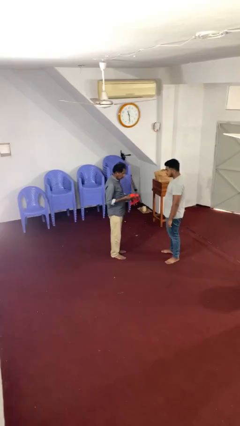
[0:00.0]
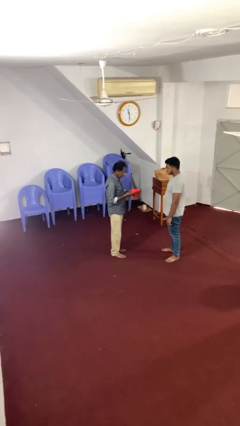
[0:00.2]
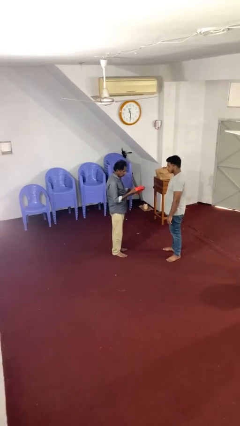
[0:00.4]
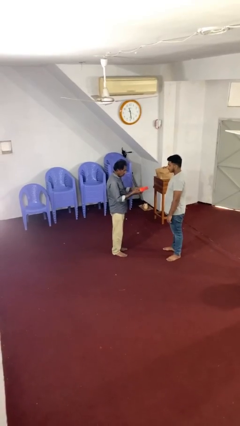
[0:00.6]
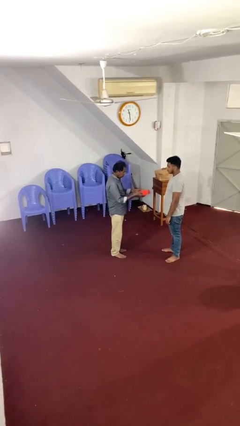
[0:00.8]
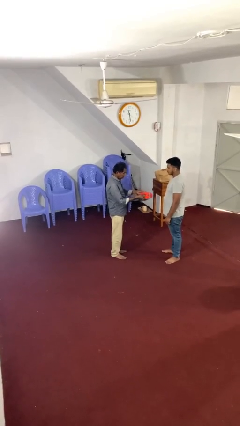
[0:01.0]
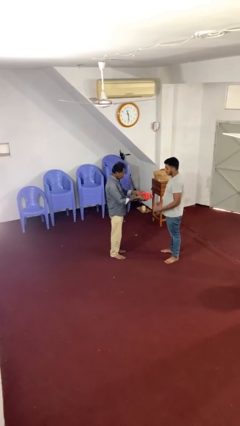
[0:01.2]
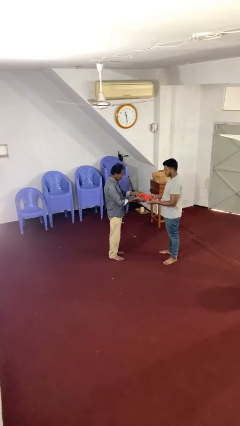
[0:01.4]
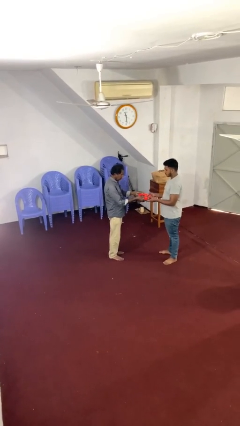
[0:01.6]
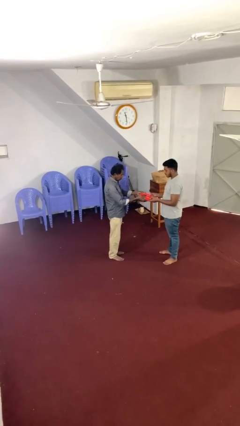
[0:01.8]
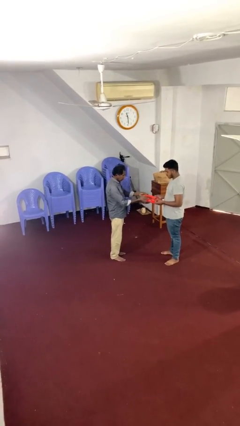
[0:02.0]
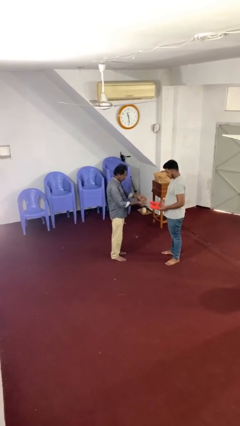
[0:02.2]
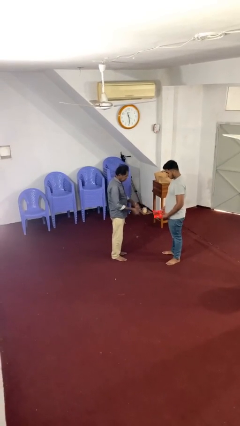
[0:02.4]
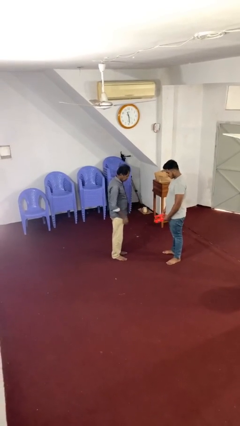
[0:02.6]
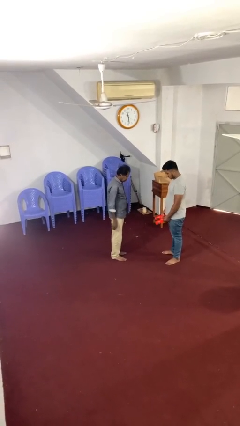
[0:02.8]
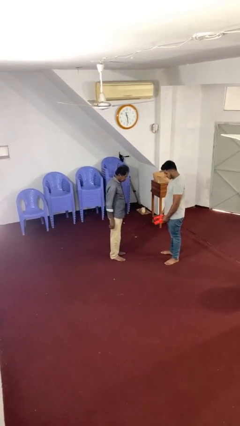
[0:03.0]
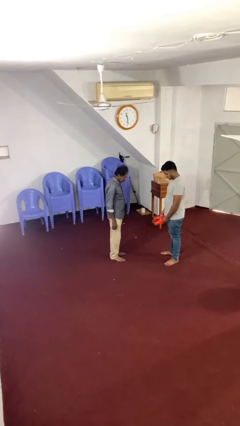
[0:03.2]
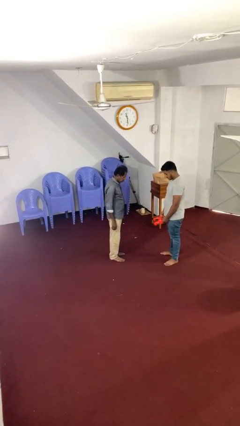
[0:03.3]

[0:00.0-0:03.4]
person transfers object to person

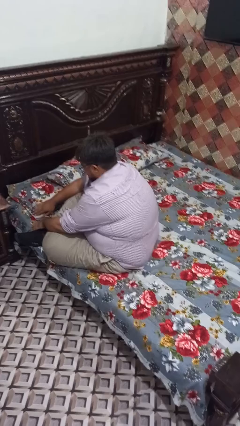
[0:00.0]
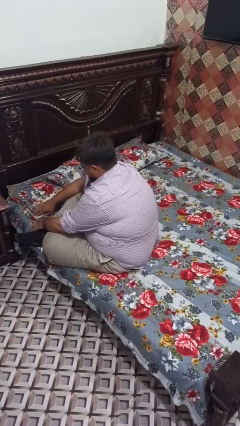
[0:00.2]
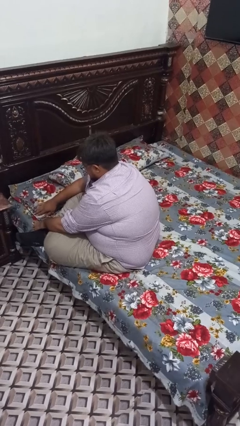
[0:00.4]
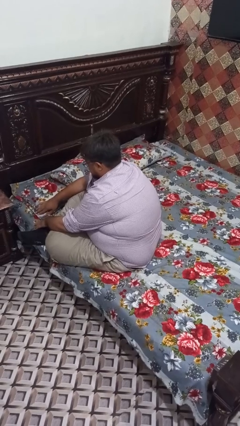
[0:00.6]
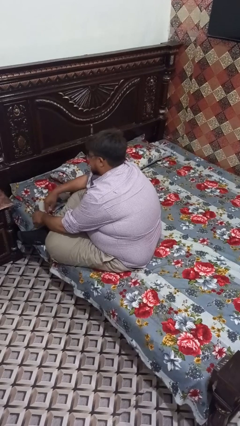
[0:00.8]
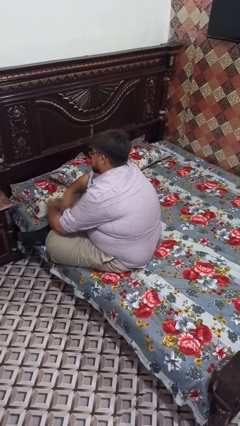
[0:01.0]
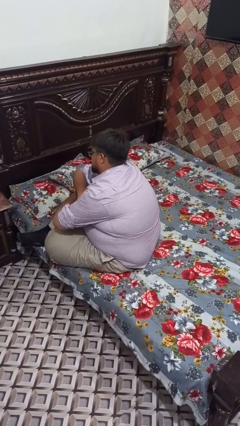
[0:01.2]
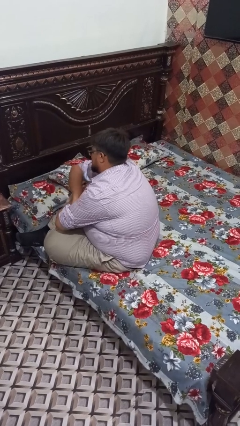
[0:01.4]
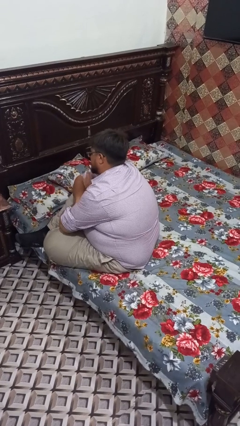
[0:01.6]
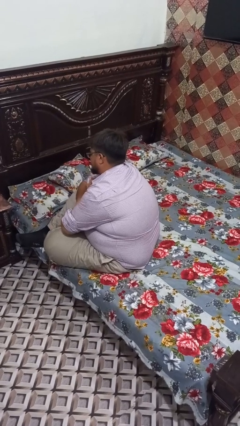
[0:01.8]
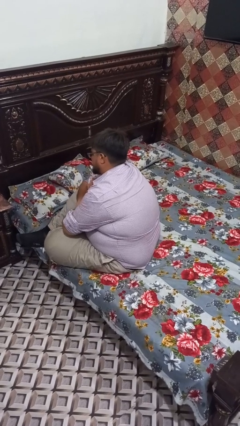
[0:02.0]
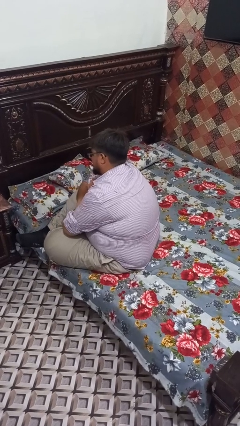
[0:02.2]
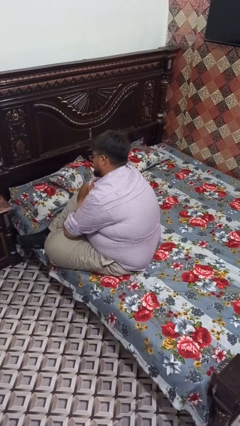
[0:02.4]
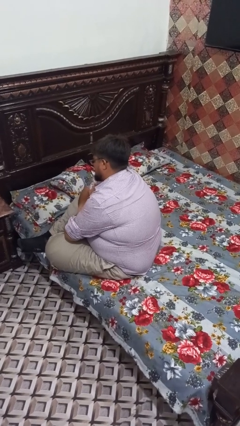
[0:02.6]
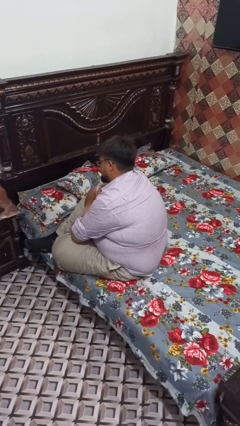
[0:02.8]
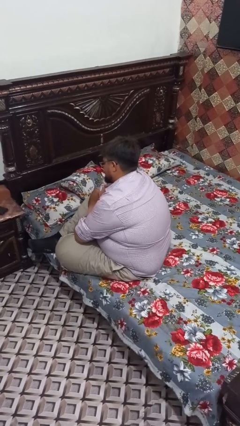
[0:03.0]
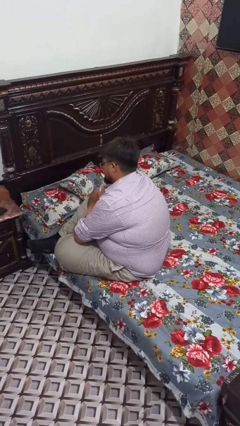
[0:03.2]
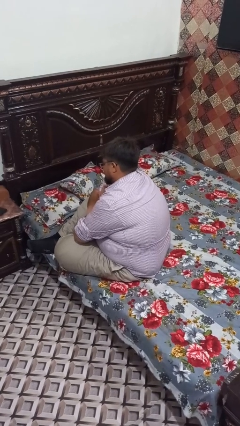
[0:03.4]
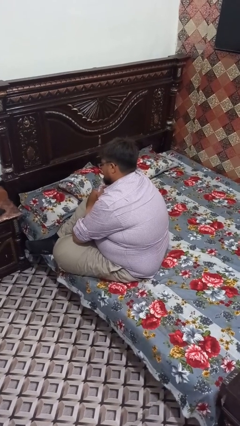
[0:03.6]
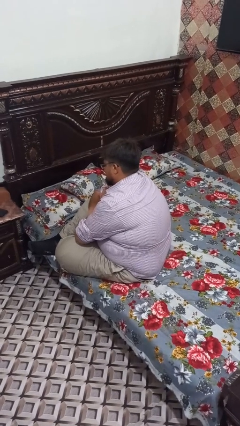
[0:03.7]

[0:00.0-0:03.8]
person crosses arms

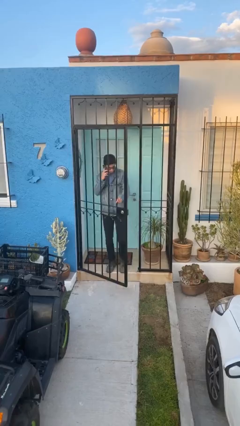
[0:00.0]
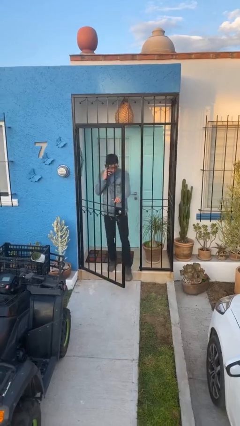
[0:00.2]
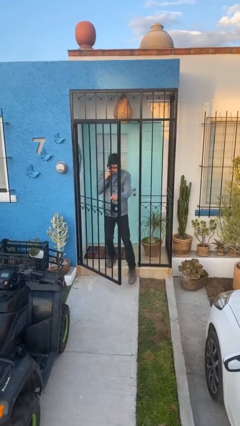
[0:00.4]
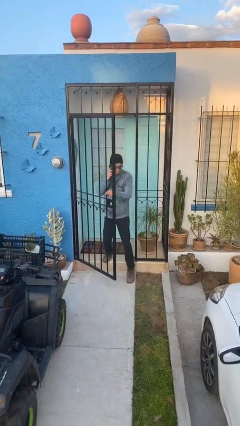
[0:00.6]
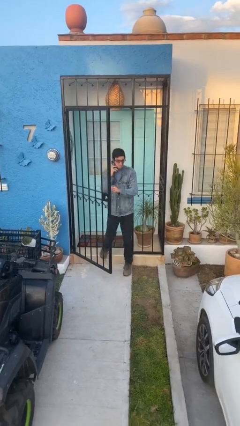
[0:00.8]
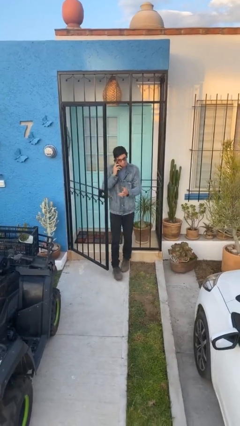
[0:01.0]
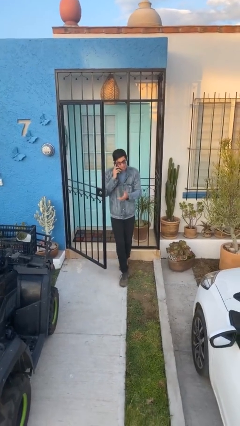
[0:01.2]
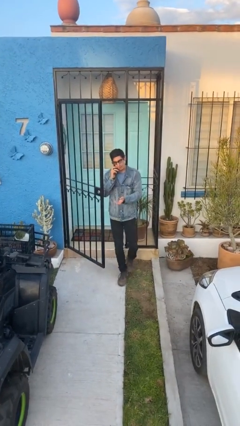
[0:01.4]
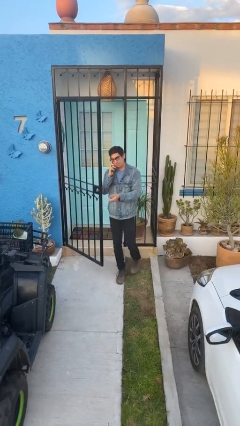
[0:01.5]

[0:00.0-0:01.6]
person enters scene through structure

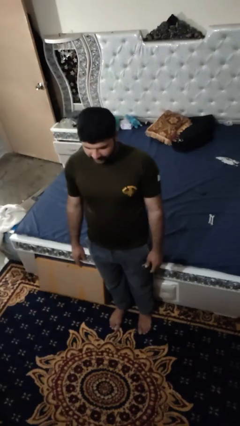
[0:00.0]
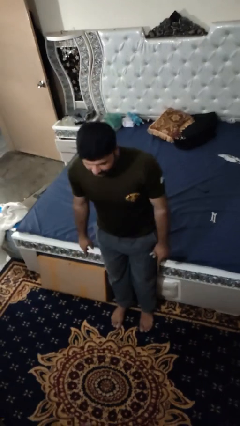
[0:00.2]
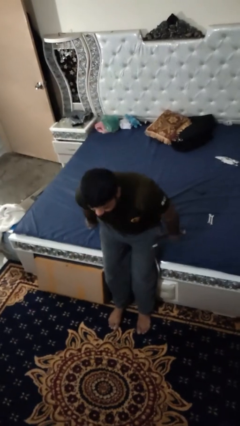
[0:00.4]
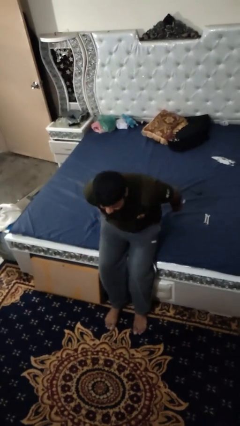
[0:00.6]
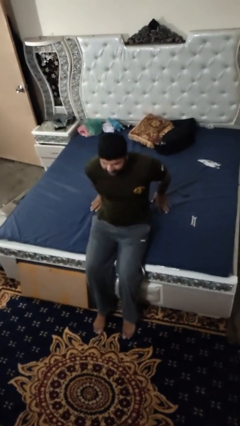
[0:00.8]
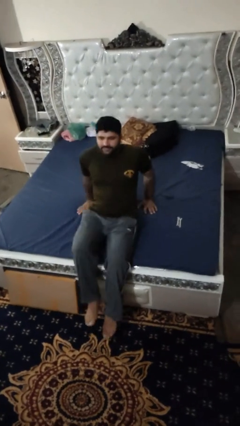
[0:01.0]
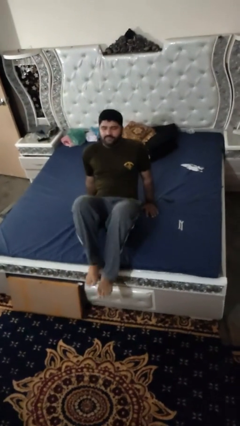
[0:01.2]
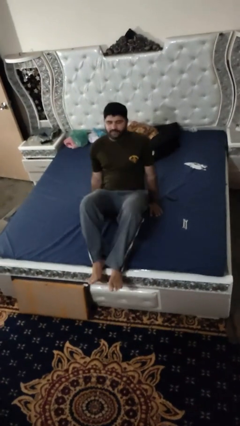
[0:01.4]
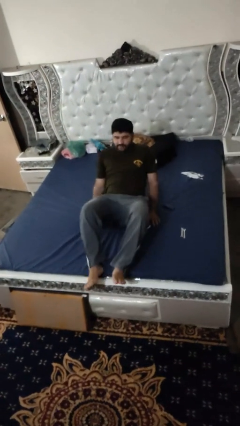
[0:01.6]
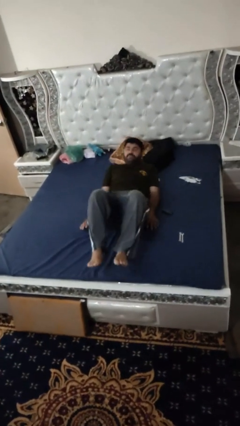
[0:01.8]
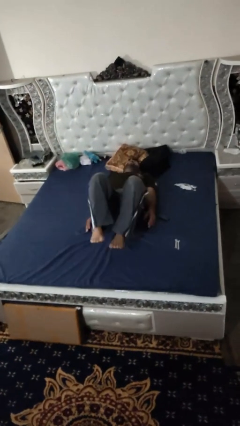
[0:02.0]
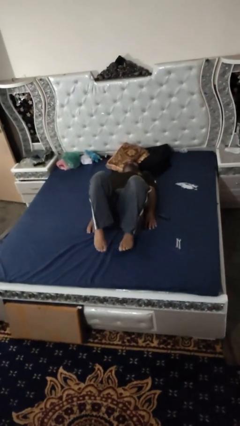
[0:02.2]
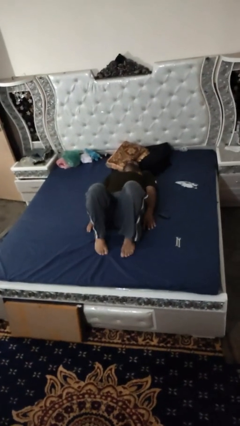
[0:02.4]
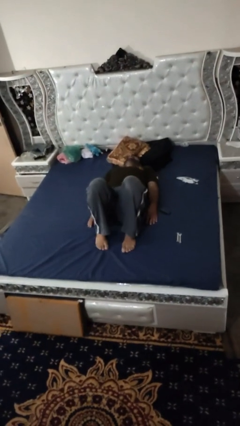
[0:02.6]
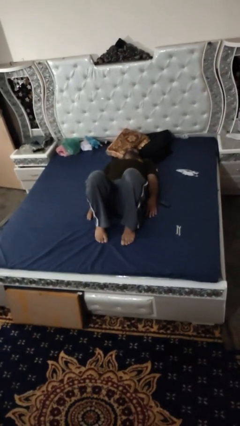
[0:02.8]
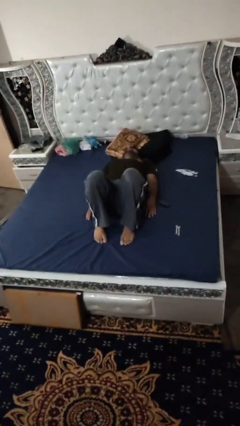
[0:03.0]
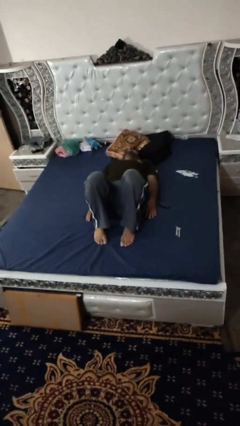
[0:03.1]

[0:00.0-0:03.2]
person lies down on bed

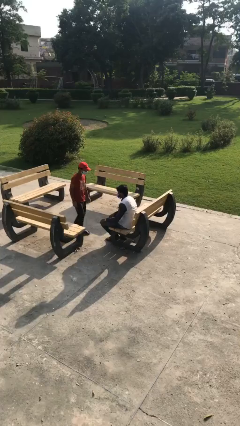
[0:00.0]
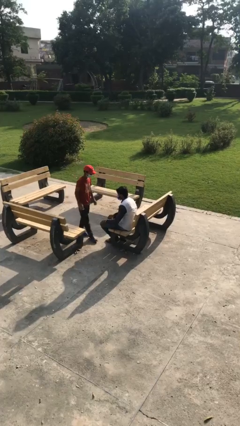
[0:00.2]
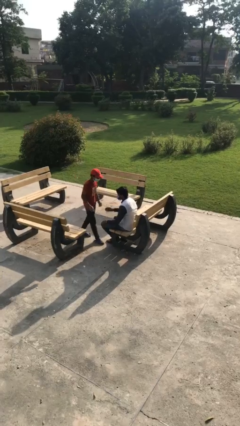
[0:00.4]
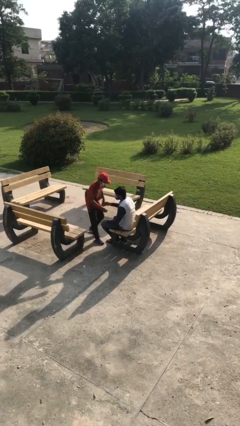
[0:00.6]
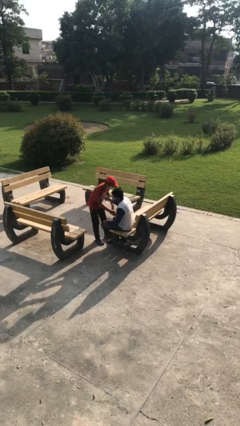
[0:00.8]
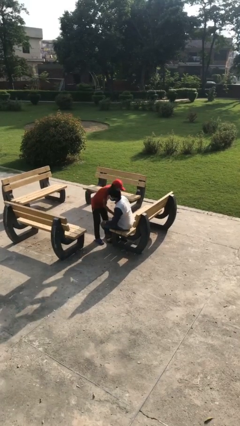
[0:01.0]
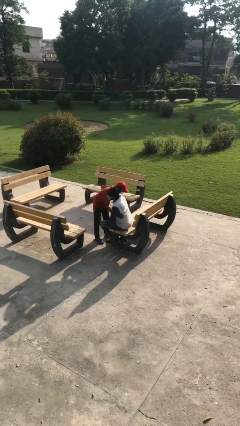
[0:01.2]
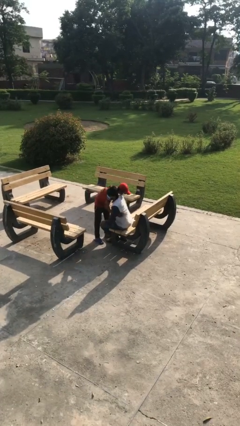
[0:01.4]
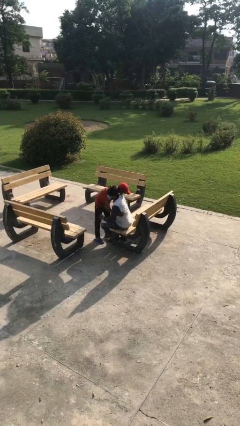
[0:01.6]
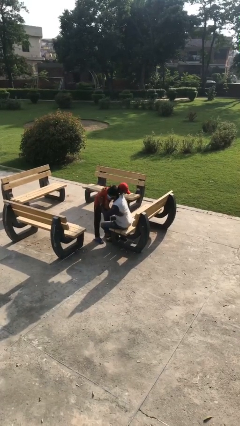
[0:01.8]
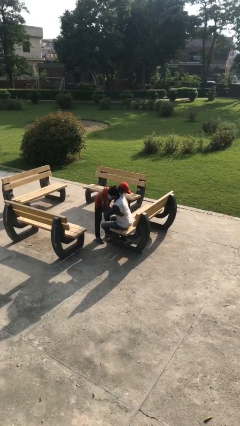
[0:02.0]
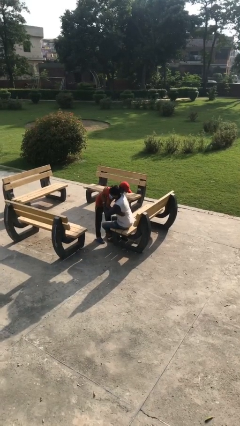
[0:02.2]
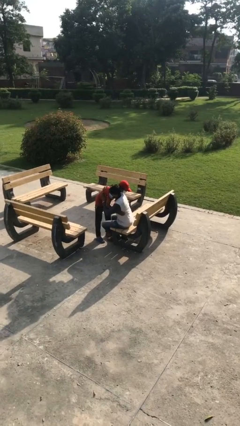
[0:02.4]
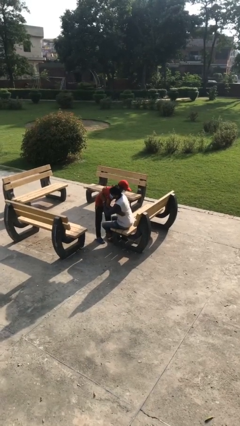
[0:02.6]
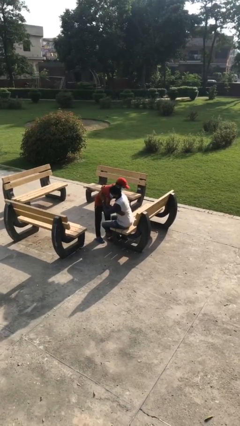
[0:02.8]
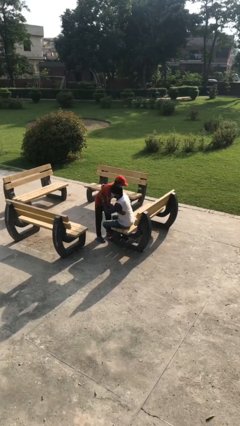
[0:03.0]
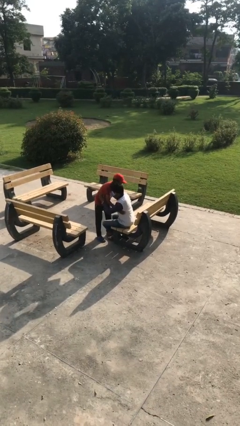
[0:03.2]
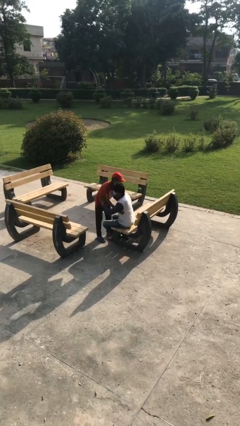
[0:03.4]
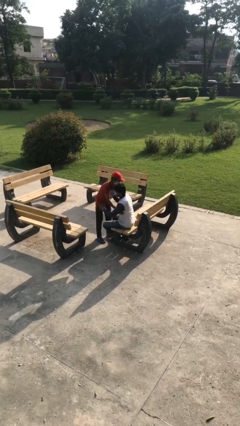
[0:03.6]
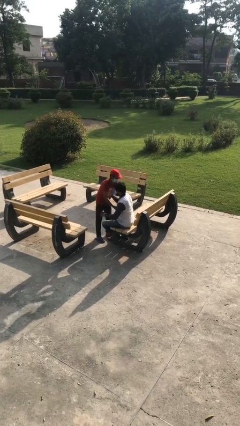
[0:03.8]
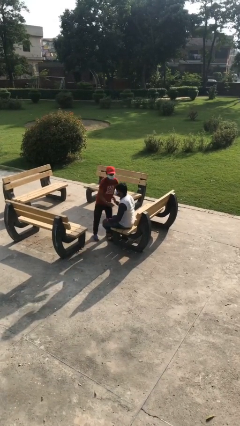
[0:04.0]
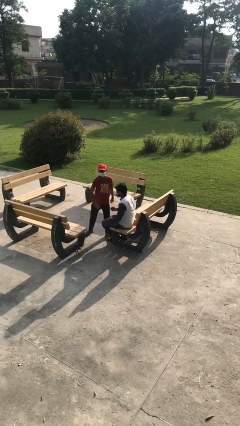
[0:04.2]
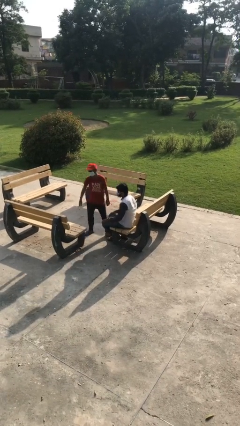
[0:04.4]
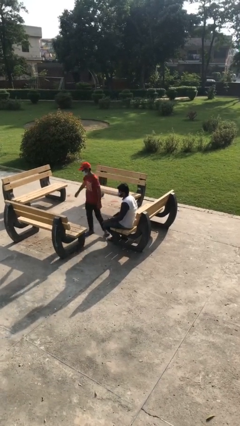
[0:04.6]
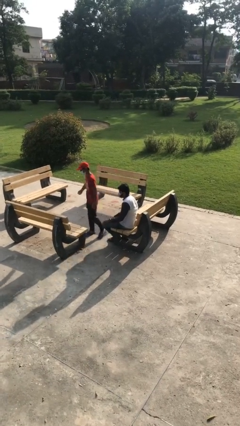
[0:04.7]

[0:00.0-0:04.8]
person embraces person

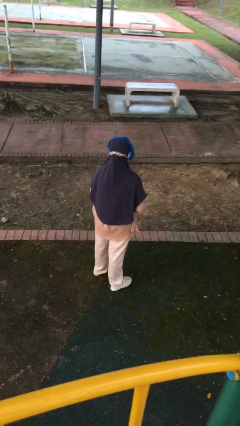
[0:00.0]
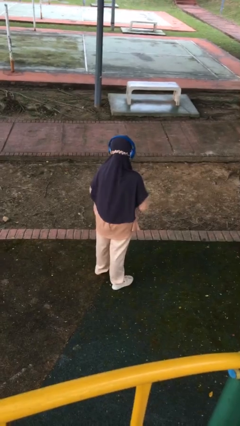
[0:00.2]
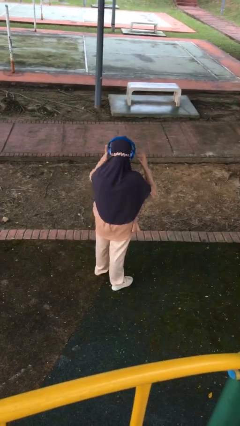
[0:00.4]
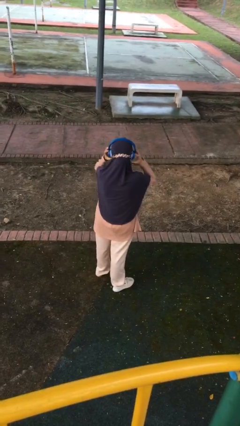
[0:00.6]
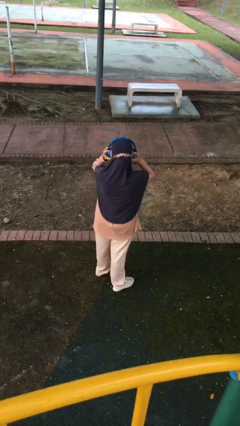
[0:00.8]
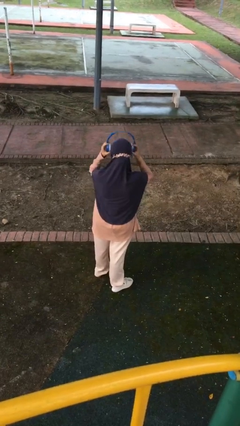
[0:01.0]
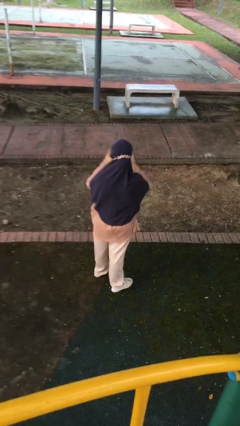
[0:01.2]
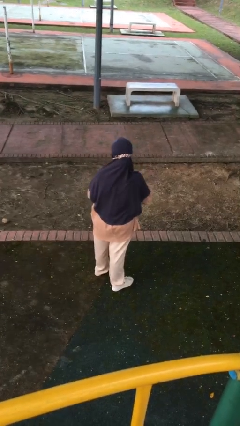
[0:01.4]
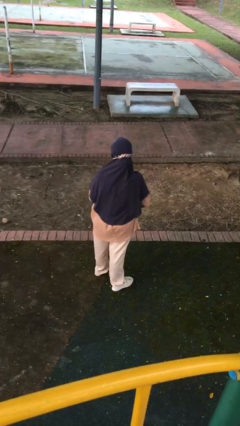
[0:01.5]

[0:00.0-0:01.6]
person takes off headphones
